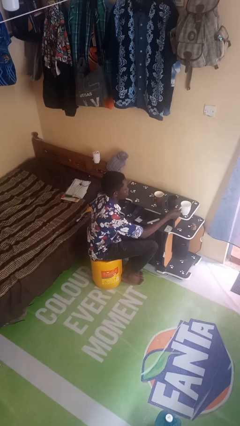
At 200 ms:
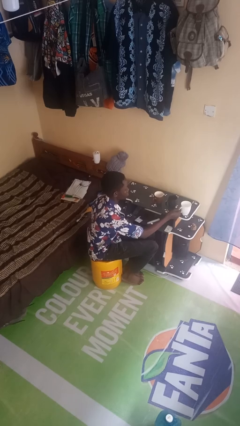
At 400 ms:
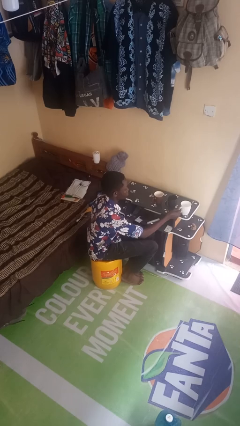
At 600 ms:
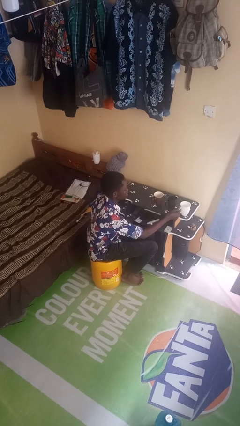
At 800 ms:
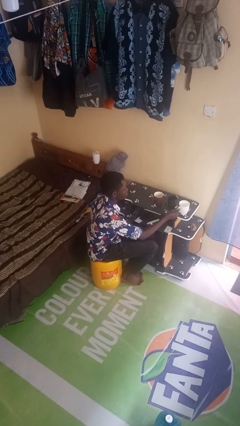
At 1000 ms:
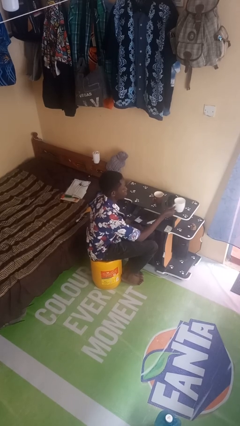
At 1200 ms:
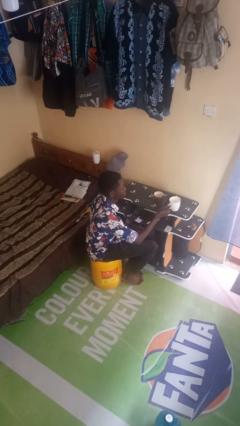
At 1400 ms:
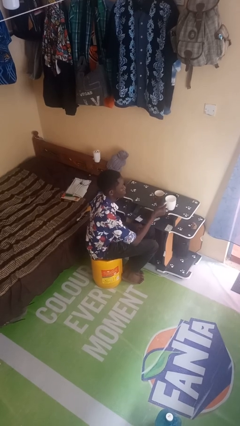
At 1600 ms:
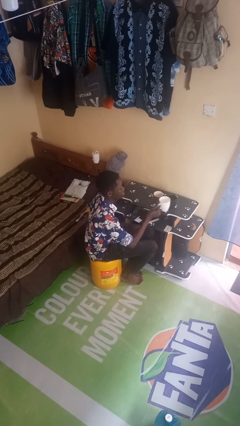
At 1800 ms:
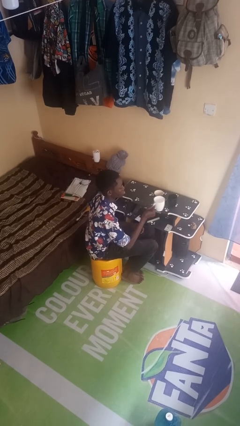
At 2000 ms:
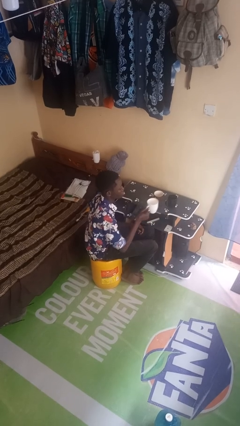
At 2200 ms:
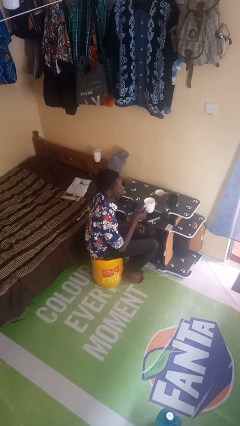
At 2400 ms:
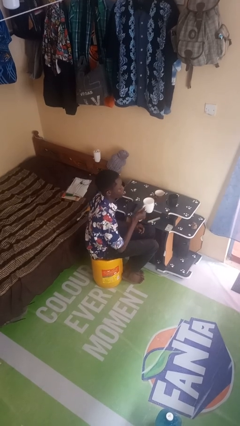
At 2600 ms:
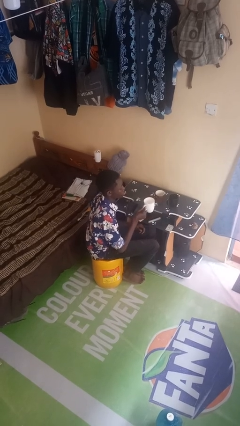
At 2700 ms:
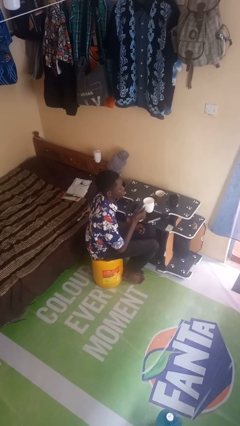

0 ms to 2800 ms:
person picks up object from table

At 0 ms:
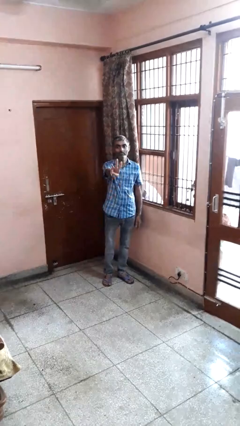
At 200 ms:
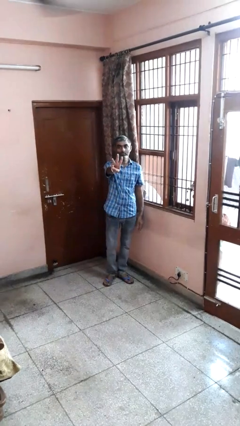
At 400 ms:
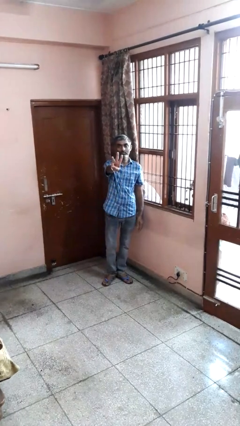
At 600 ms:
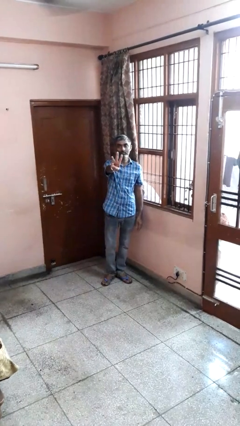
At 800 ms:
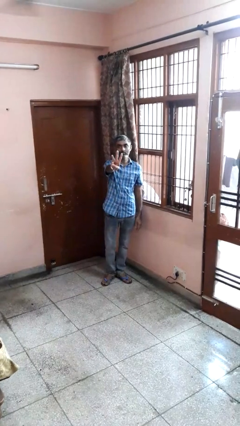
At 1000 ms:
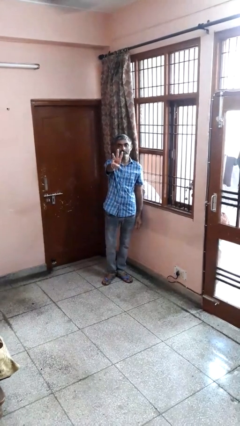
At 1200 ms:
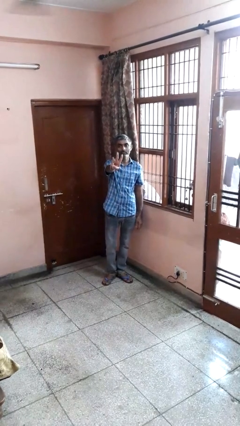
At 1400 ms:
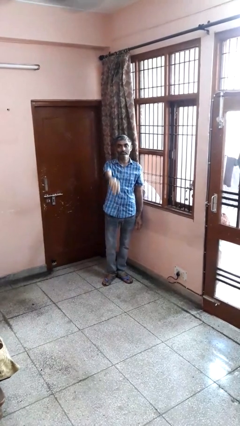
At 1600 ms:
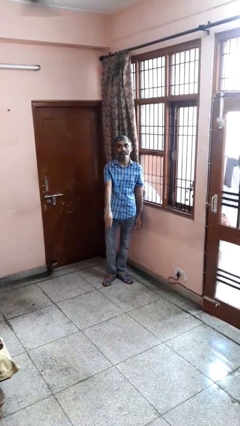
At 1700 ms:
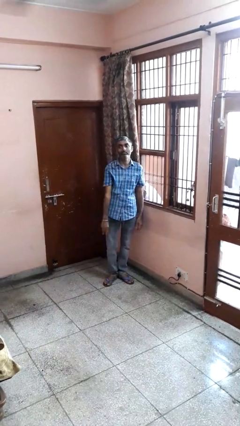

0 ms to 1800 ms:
person gestures number three

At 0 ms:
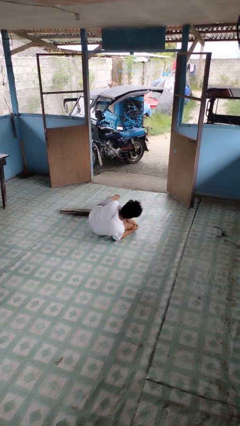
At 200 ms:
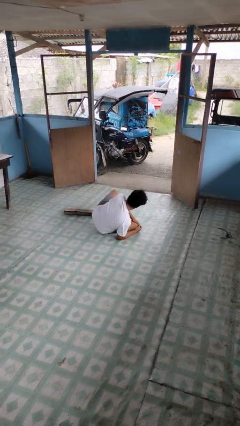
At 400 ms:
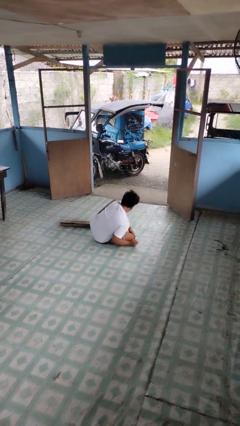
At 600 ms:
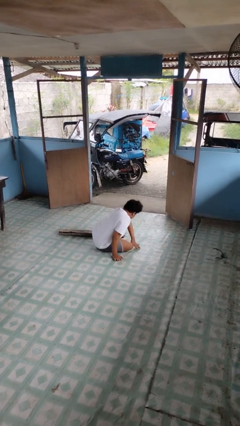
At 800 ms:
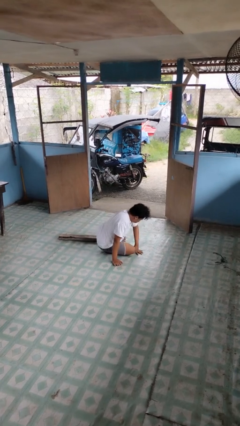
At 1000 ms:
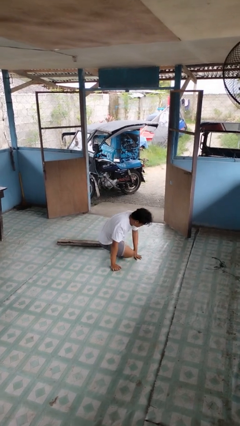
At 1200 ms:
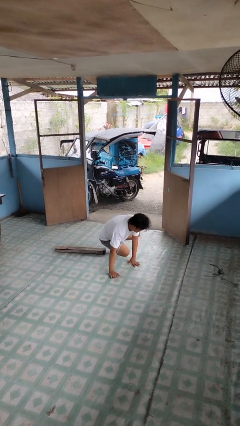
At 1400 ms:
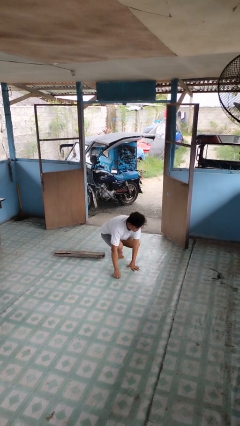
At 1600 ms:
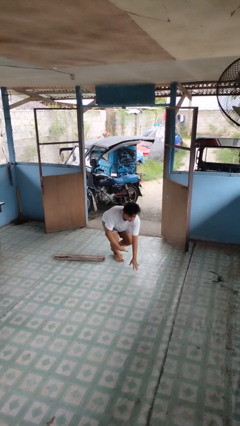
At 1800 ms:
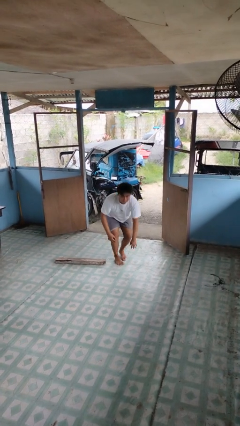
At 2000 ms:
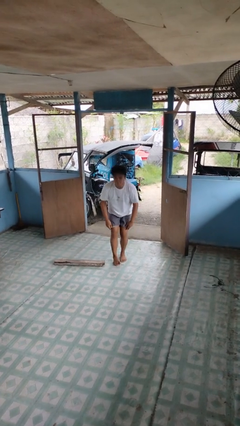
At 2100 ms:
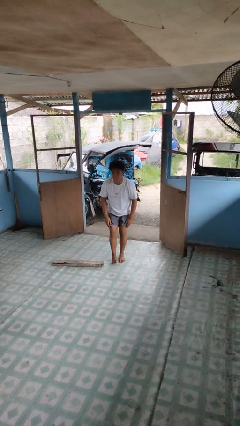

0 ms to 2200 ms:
person stands up from floor

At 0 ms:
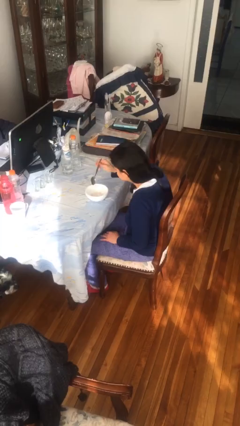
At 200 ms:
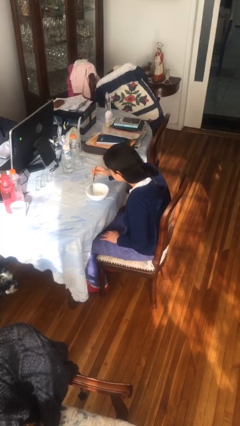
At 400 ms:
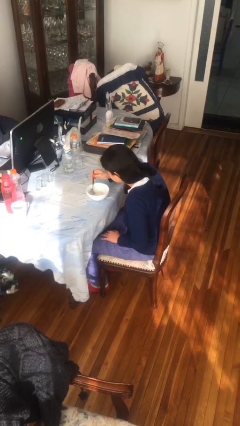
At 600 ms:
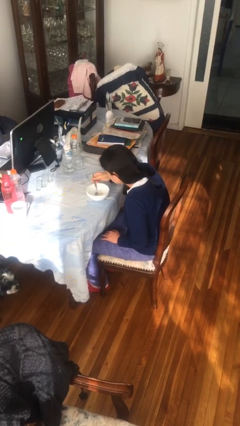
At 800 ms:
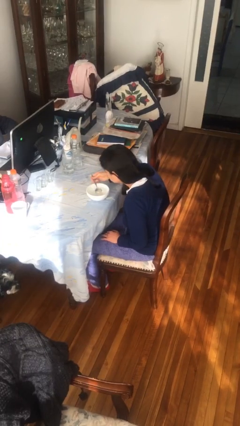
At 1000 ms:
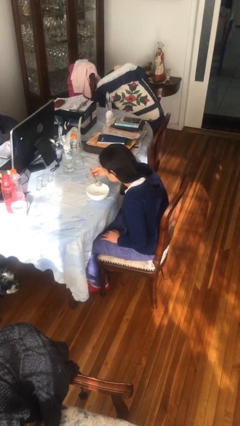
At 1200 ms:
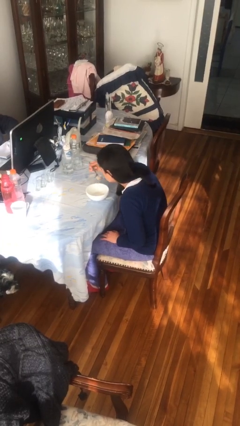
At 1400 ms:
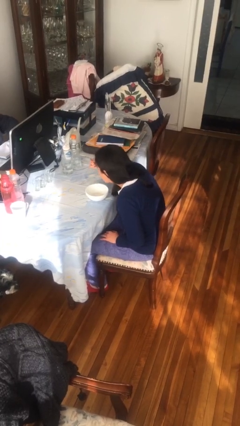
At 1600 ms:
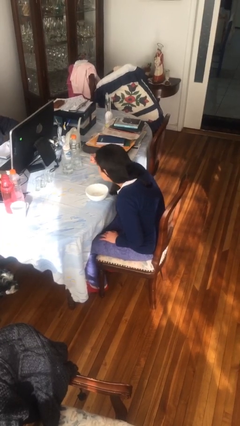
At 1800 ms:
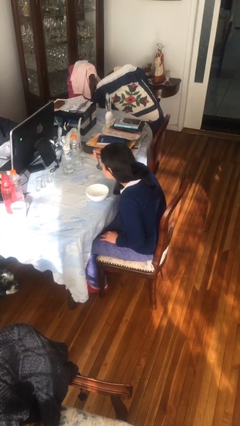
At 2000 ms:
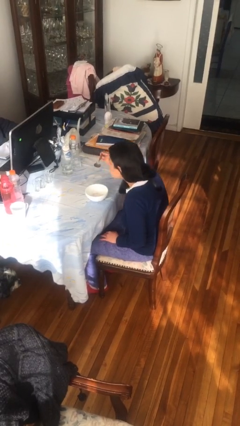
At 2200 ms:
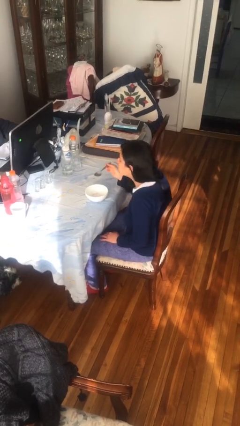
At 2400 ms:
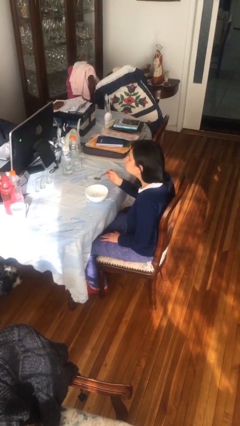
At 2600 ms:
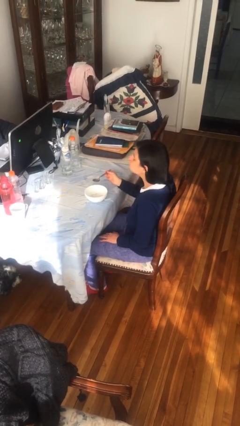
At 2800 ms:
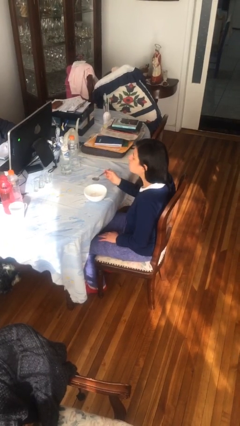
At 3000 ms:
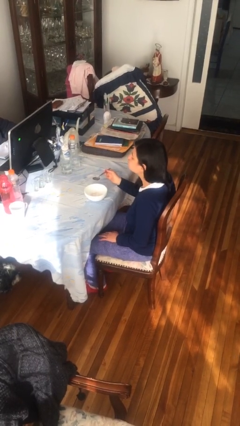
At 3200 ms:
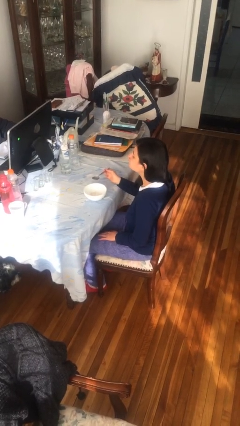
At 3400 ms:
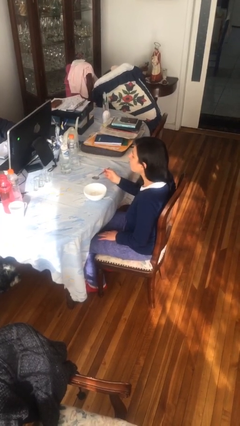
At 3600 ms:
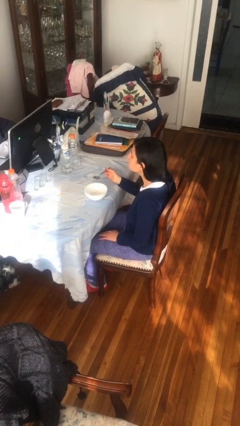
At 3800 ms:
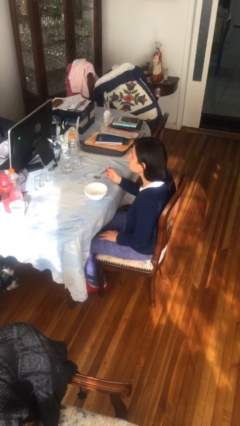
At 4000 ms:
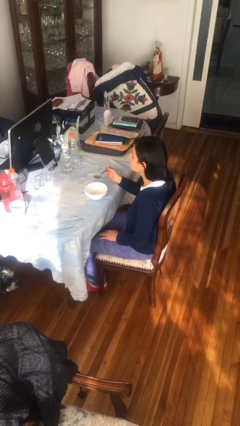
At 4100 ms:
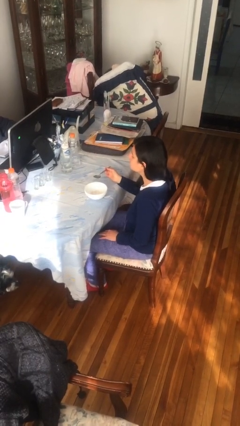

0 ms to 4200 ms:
person eats with utensil

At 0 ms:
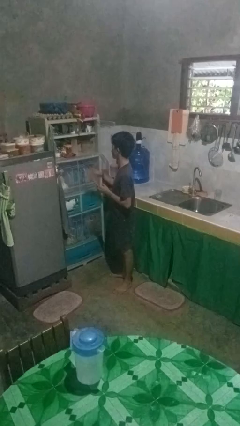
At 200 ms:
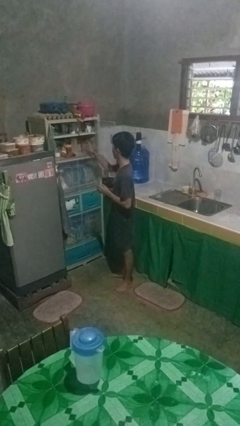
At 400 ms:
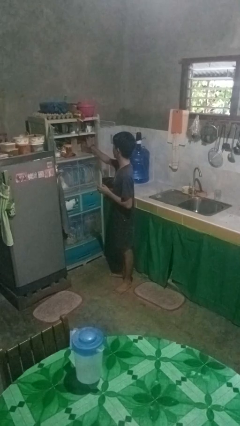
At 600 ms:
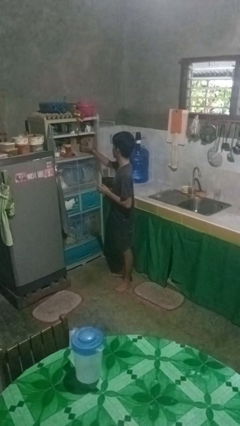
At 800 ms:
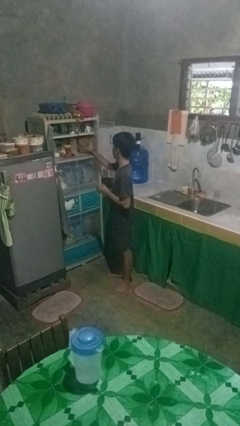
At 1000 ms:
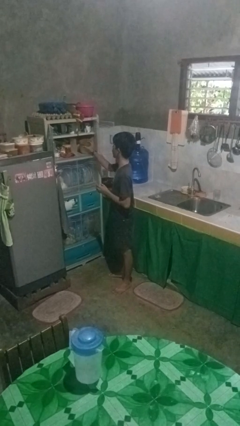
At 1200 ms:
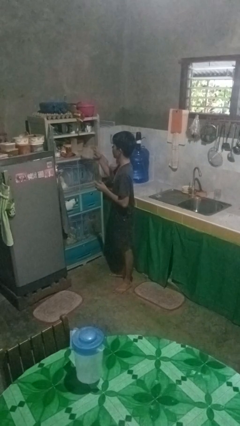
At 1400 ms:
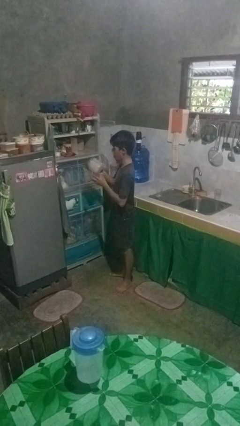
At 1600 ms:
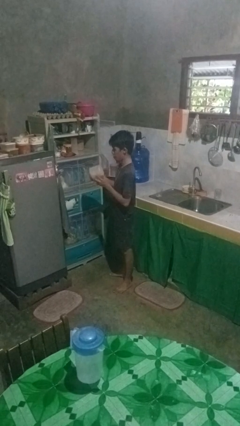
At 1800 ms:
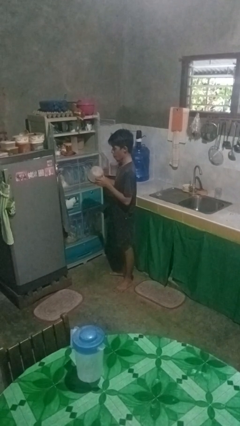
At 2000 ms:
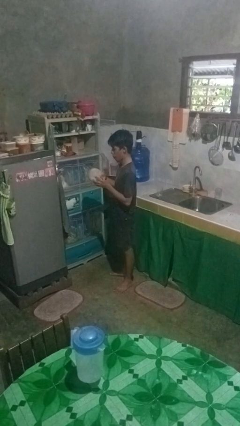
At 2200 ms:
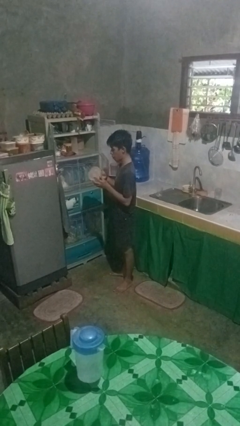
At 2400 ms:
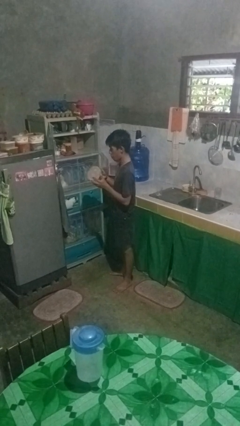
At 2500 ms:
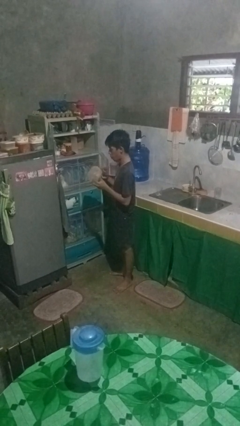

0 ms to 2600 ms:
person takes object from cabinet

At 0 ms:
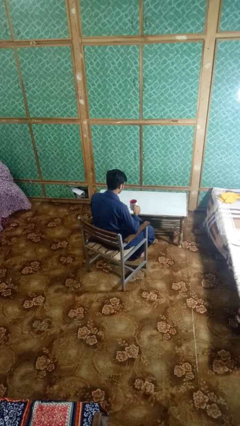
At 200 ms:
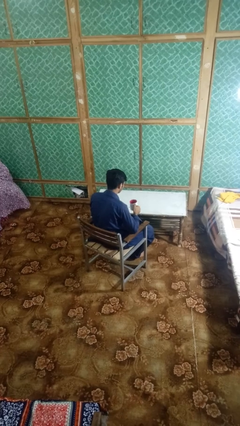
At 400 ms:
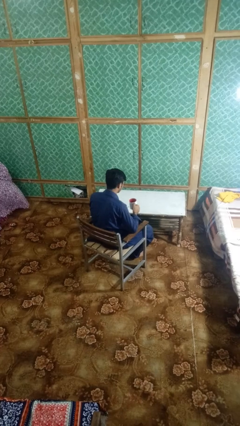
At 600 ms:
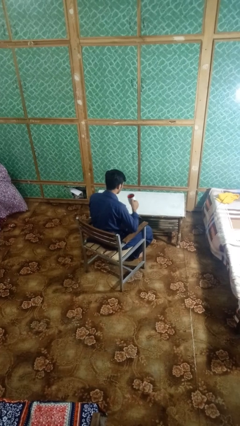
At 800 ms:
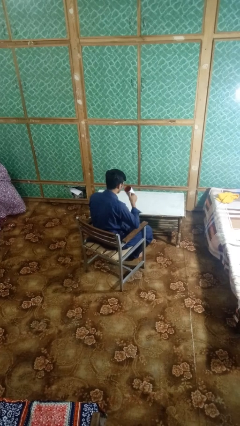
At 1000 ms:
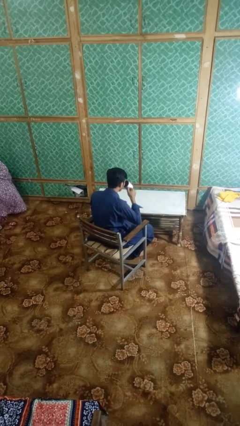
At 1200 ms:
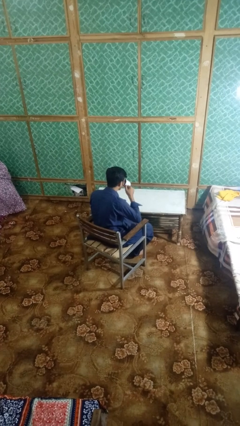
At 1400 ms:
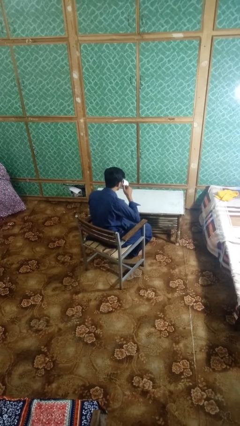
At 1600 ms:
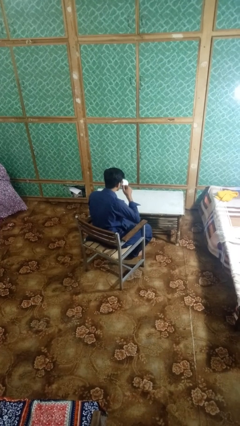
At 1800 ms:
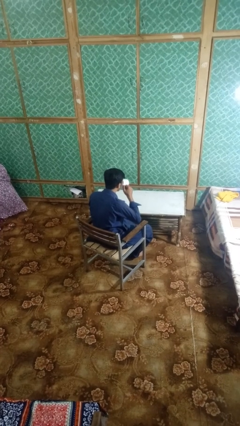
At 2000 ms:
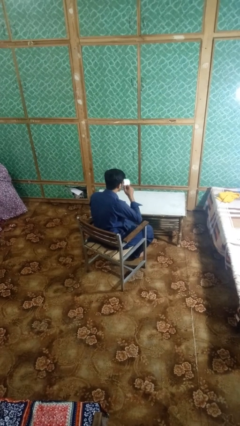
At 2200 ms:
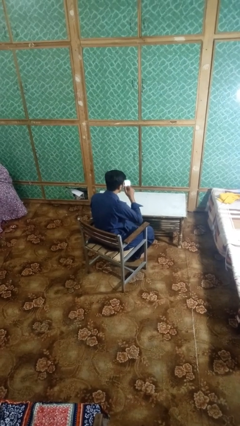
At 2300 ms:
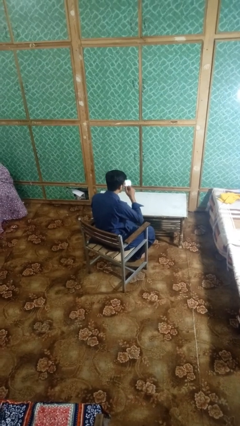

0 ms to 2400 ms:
person drinks from mug

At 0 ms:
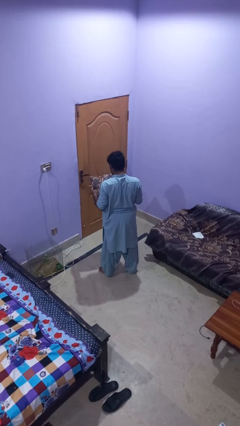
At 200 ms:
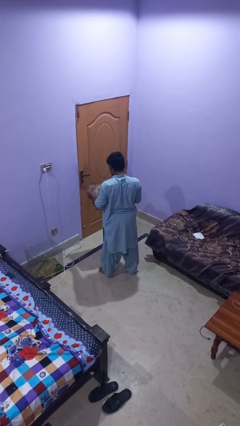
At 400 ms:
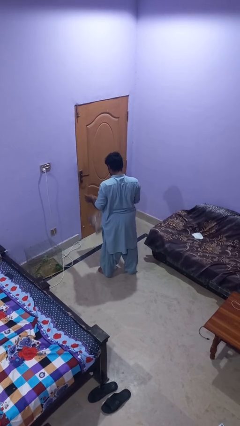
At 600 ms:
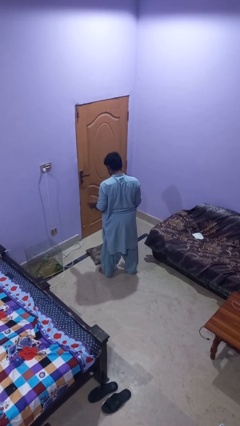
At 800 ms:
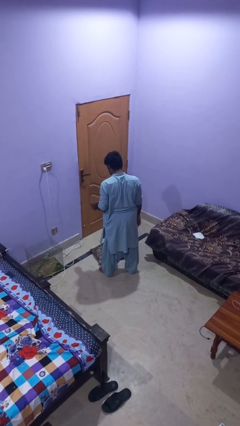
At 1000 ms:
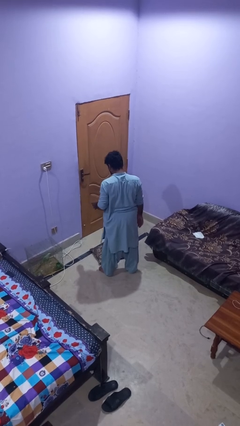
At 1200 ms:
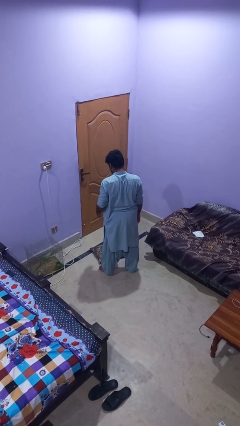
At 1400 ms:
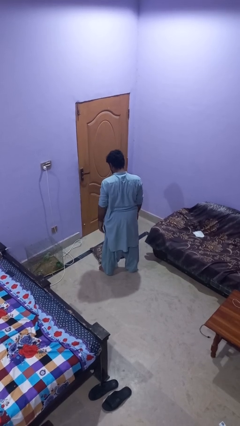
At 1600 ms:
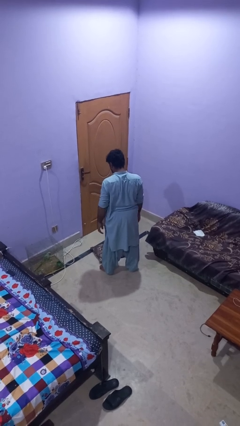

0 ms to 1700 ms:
person drops object
